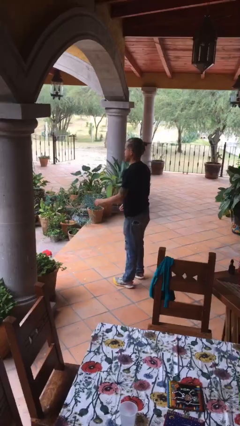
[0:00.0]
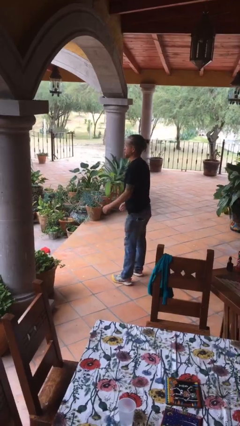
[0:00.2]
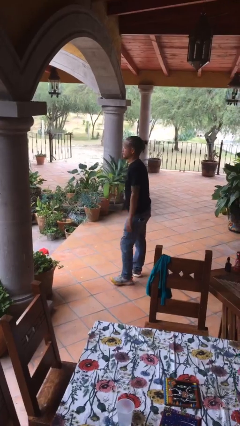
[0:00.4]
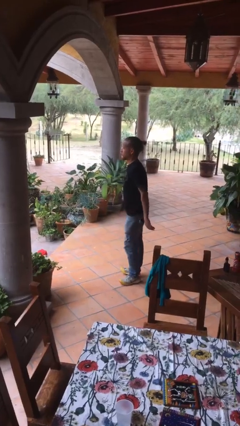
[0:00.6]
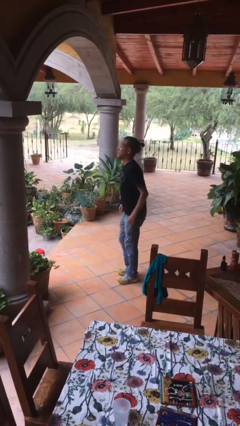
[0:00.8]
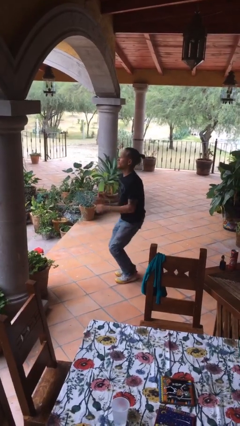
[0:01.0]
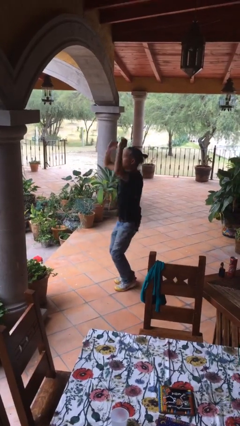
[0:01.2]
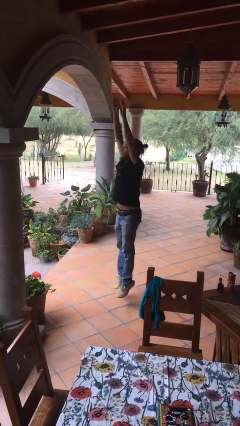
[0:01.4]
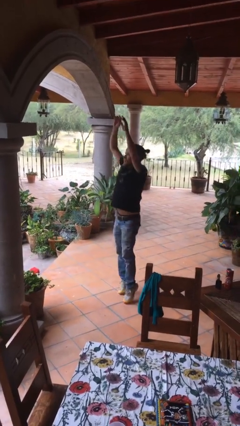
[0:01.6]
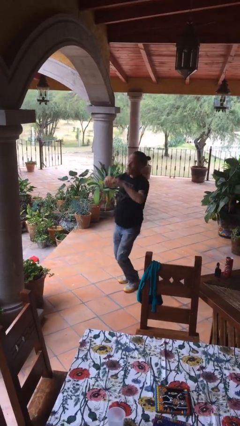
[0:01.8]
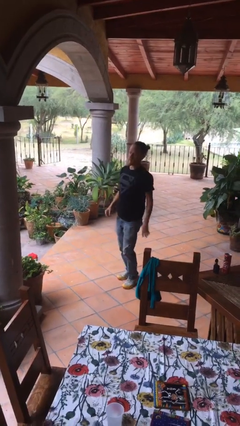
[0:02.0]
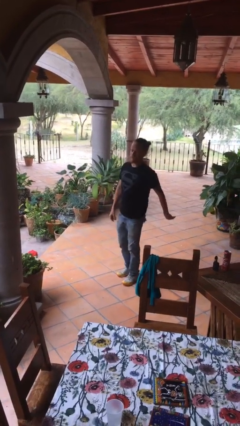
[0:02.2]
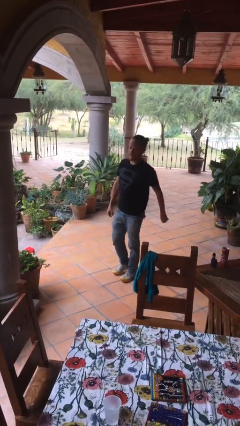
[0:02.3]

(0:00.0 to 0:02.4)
person jumps

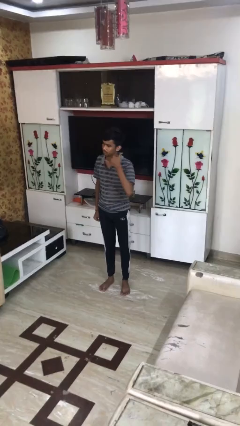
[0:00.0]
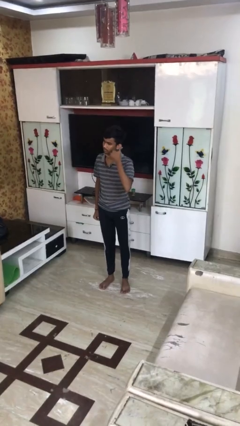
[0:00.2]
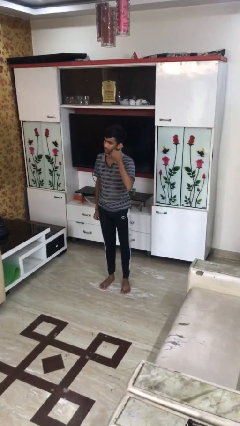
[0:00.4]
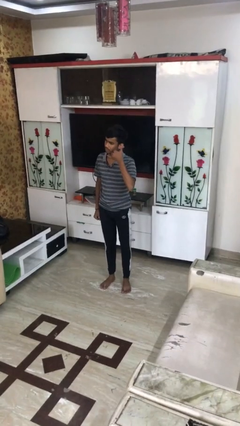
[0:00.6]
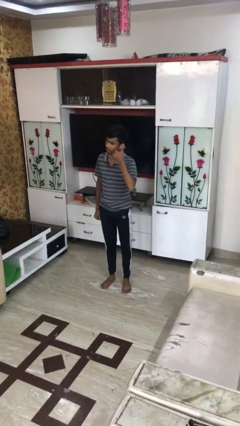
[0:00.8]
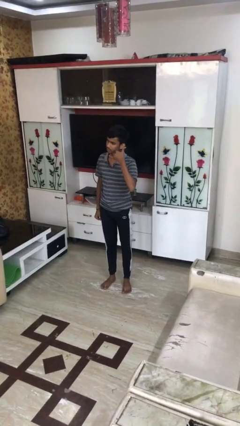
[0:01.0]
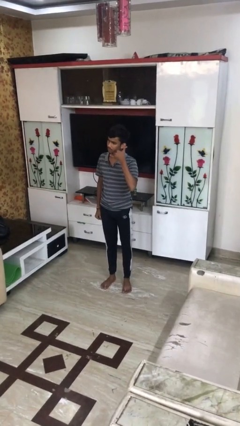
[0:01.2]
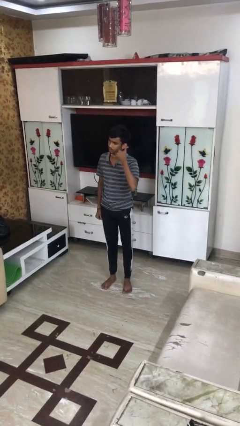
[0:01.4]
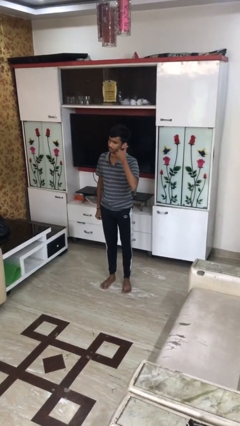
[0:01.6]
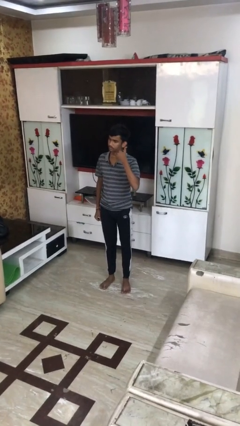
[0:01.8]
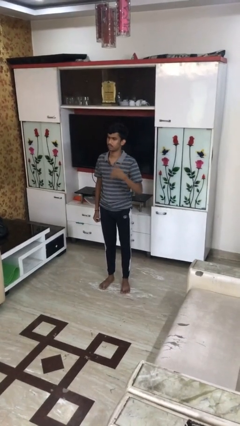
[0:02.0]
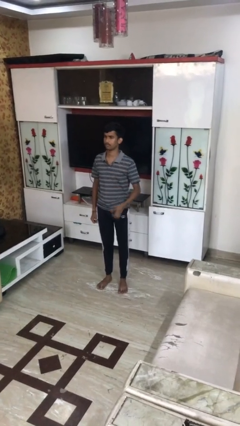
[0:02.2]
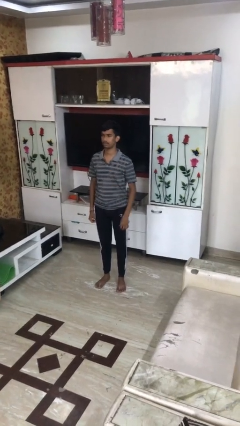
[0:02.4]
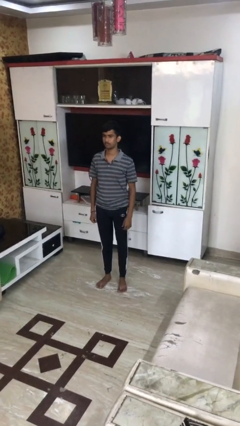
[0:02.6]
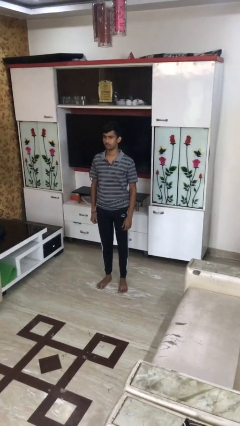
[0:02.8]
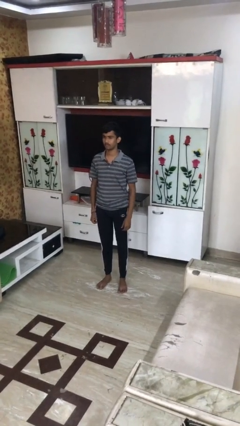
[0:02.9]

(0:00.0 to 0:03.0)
person gestures call me

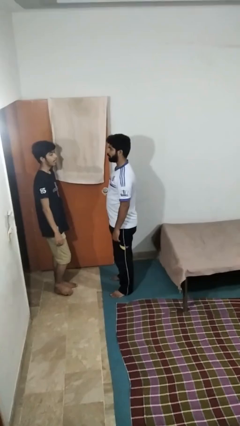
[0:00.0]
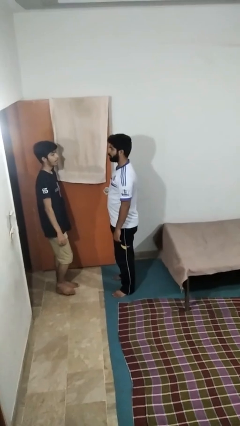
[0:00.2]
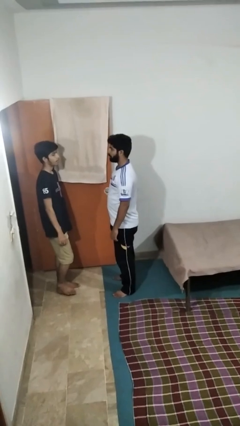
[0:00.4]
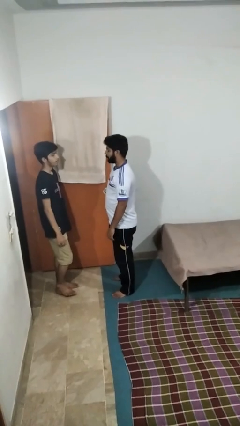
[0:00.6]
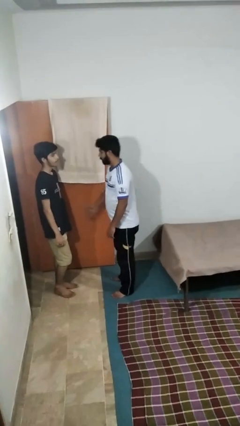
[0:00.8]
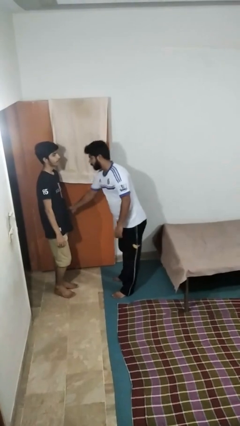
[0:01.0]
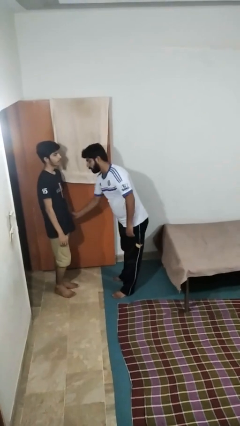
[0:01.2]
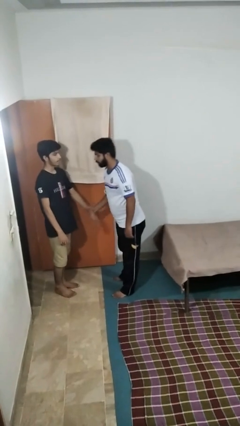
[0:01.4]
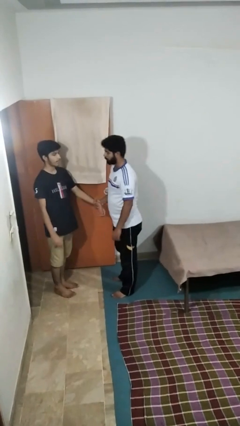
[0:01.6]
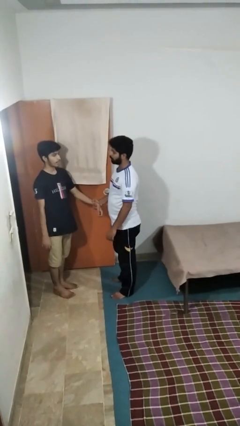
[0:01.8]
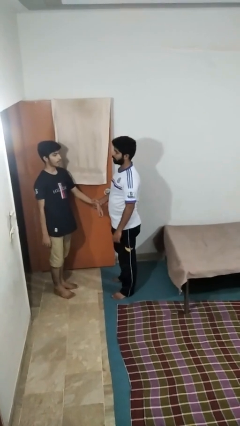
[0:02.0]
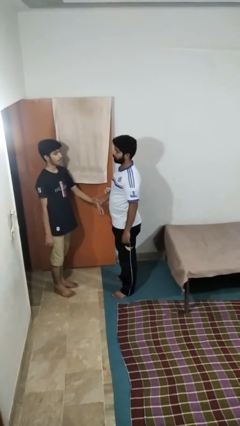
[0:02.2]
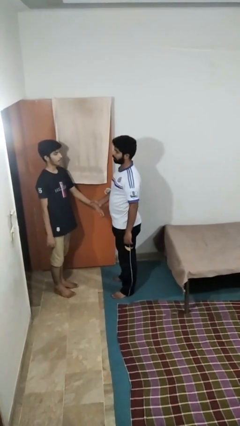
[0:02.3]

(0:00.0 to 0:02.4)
person grabs person by forearm

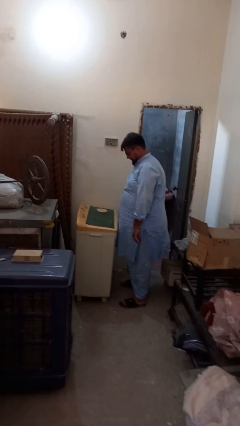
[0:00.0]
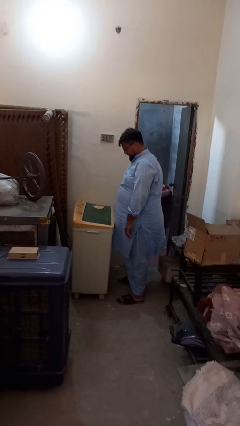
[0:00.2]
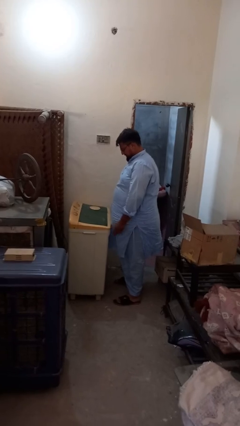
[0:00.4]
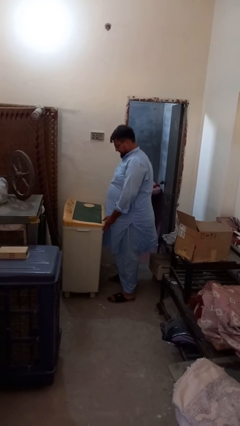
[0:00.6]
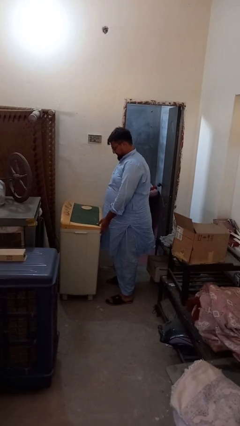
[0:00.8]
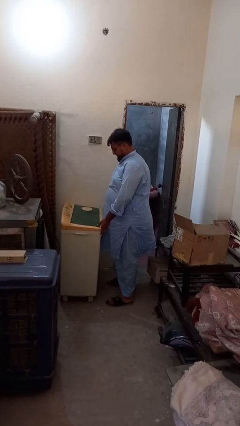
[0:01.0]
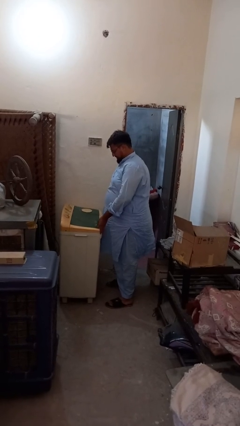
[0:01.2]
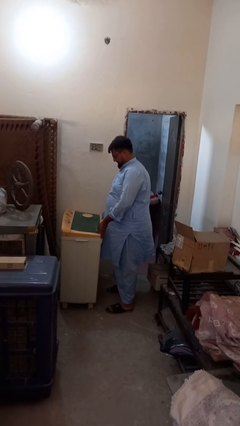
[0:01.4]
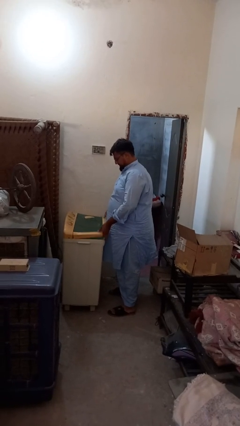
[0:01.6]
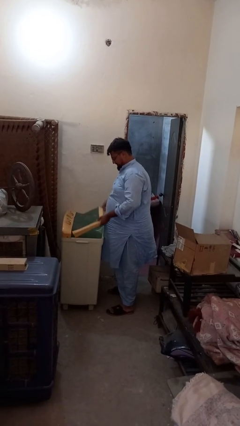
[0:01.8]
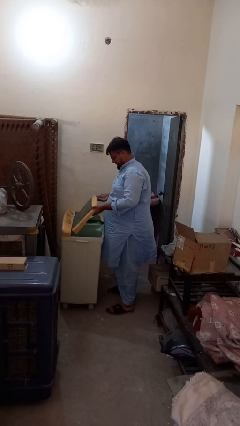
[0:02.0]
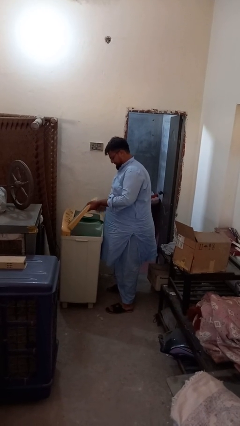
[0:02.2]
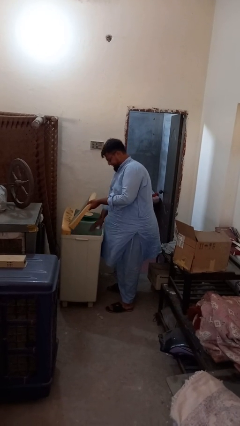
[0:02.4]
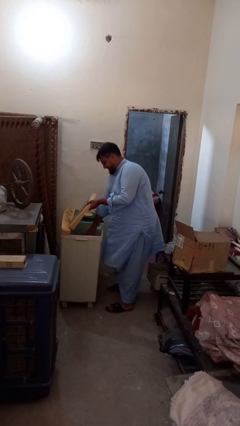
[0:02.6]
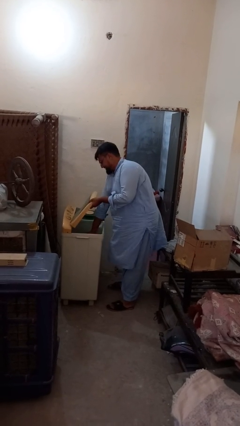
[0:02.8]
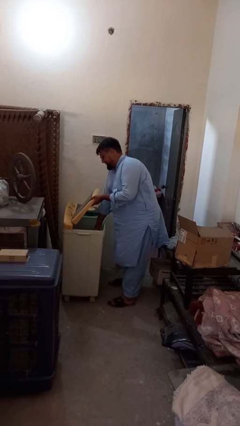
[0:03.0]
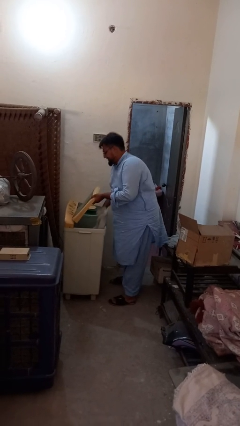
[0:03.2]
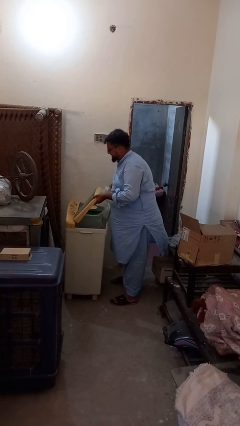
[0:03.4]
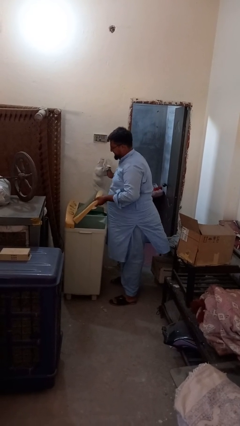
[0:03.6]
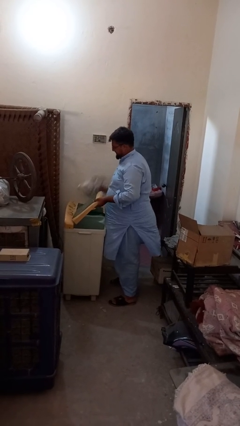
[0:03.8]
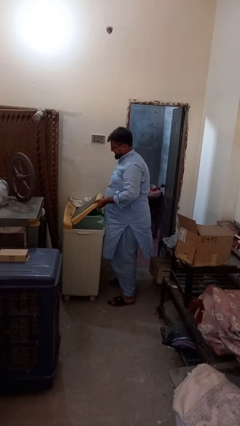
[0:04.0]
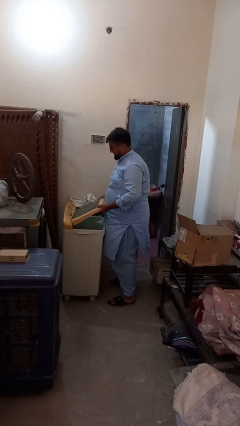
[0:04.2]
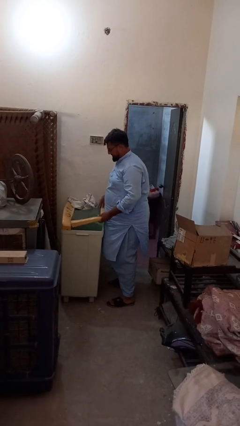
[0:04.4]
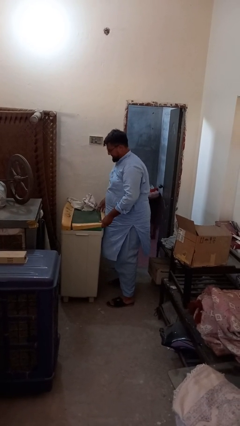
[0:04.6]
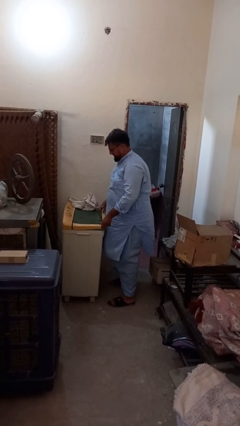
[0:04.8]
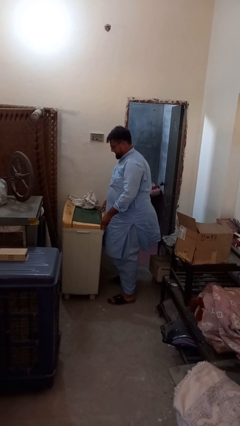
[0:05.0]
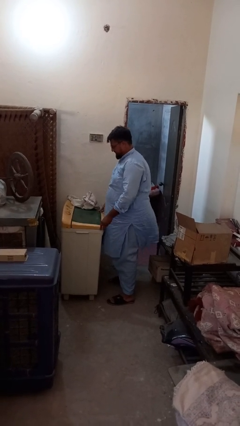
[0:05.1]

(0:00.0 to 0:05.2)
person unloads clotheswasher

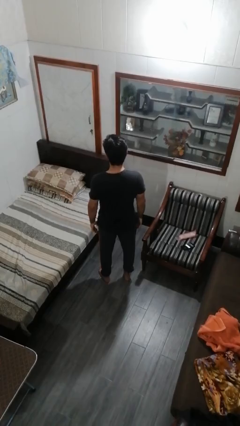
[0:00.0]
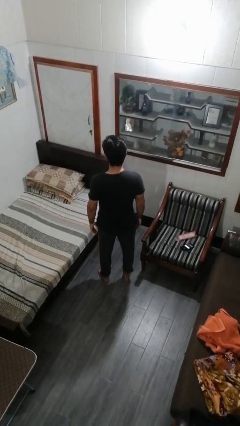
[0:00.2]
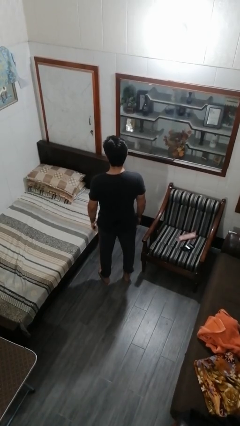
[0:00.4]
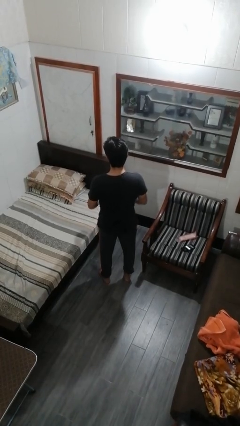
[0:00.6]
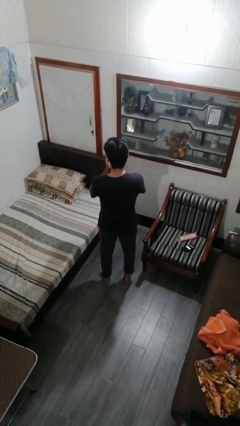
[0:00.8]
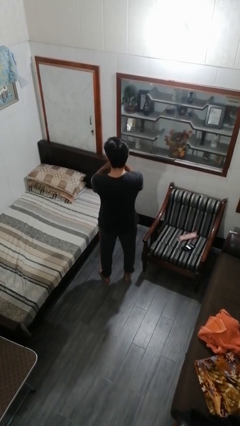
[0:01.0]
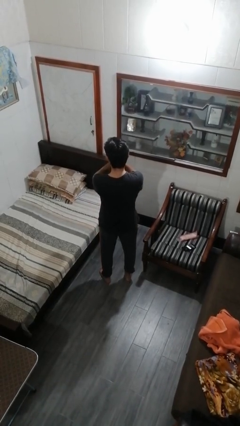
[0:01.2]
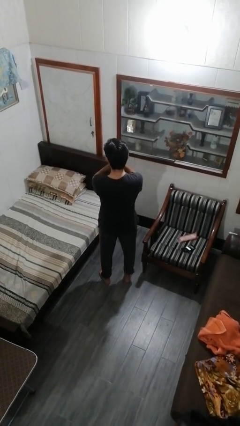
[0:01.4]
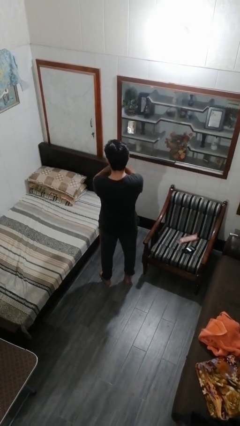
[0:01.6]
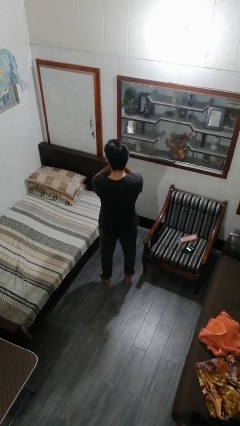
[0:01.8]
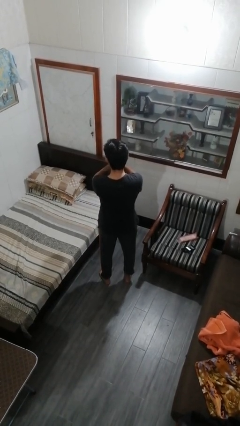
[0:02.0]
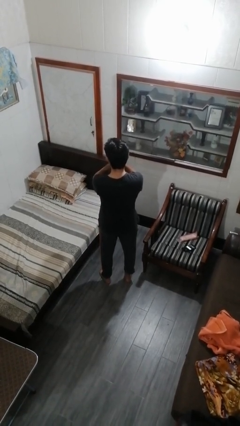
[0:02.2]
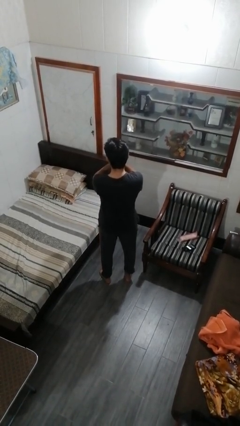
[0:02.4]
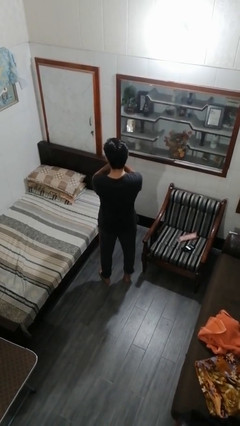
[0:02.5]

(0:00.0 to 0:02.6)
person covers face with hands

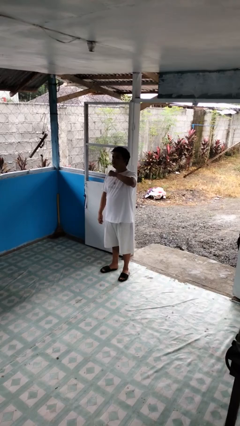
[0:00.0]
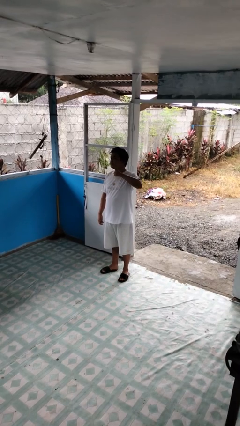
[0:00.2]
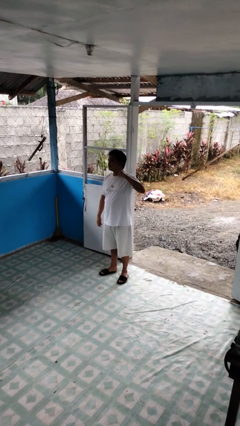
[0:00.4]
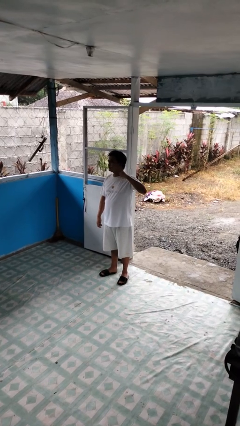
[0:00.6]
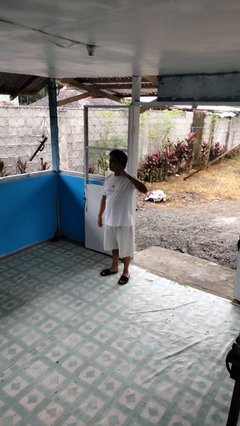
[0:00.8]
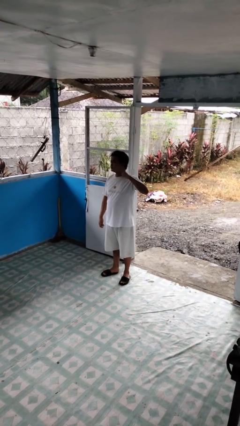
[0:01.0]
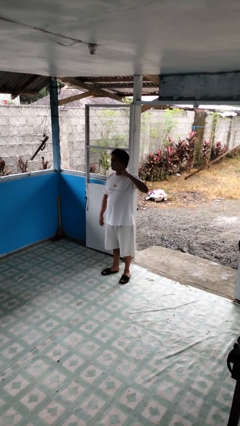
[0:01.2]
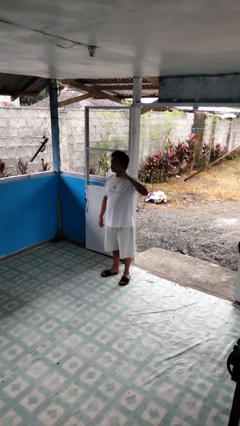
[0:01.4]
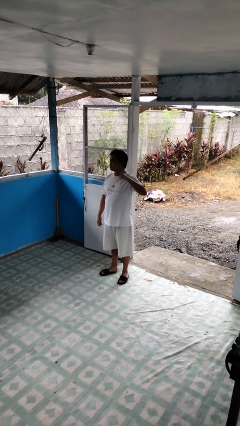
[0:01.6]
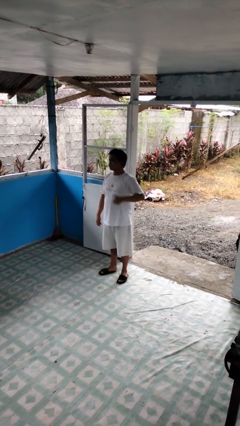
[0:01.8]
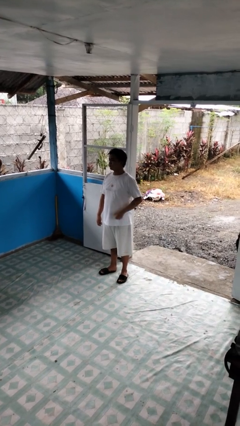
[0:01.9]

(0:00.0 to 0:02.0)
person gestures cut
